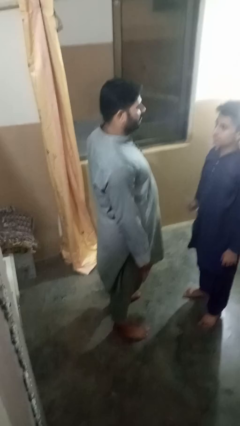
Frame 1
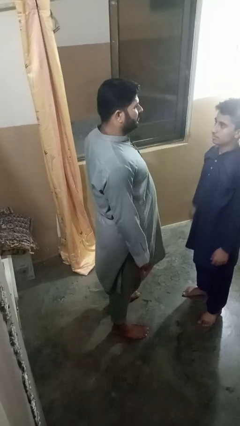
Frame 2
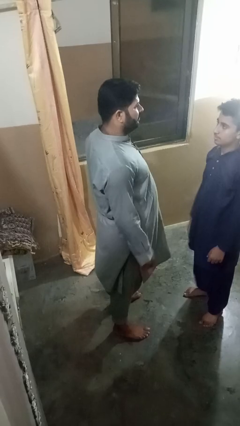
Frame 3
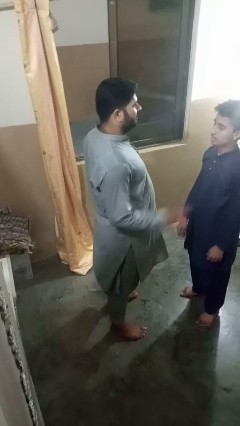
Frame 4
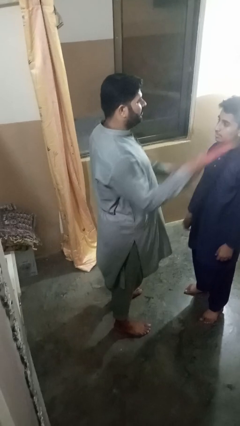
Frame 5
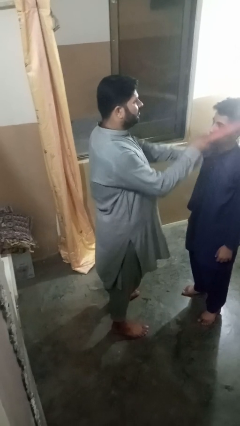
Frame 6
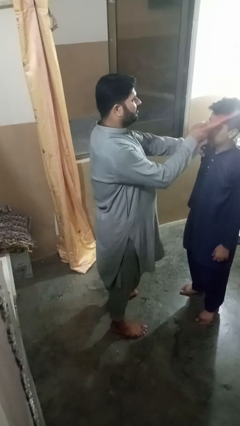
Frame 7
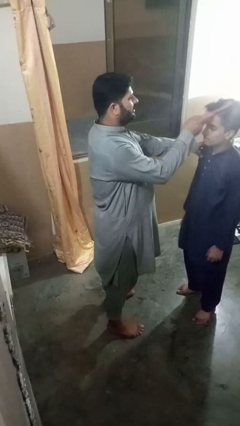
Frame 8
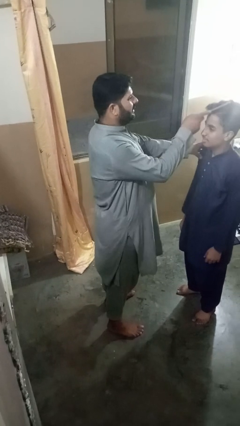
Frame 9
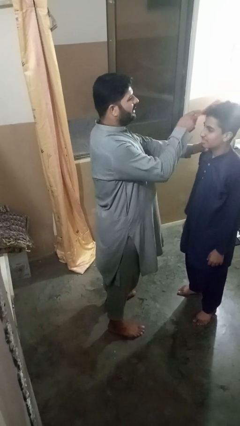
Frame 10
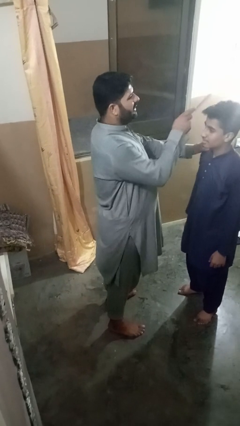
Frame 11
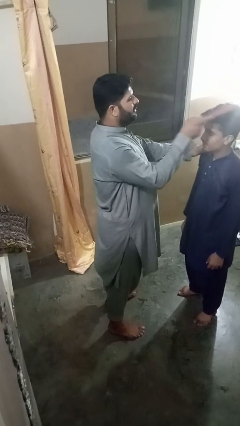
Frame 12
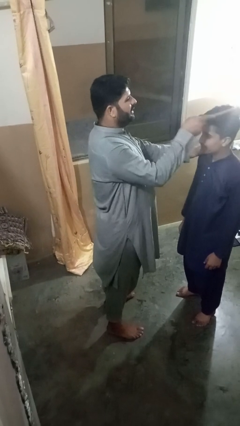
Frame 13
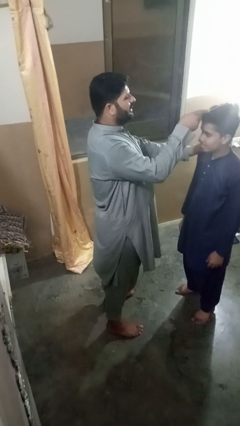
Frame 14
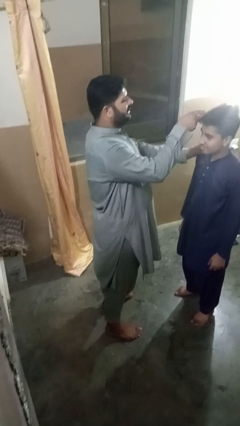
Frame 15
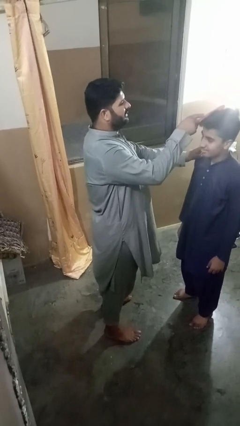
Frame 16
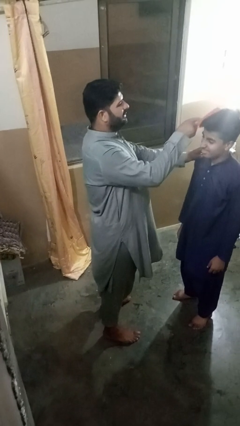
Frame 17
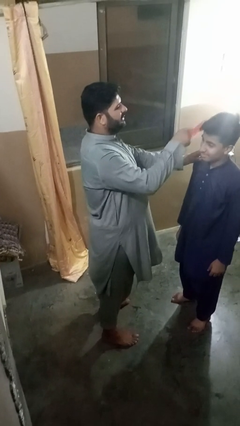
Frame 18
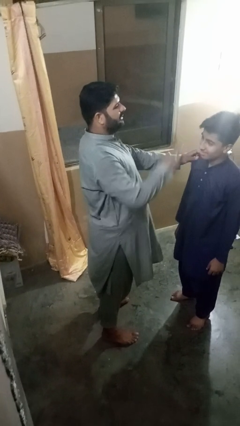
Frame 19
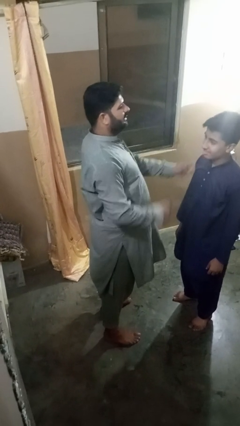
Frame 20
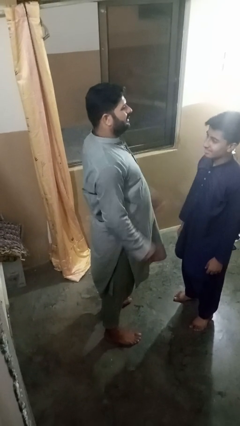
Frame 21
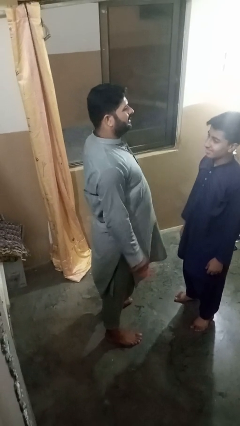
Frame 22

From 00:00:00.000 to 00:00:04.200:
person brushes hair of person

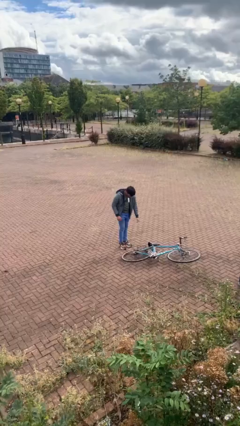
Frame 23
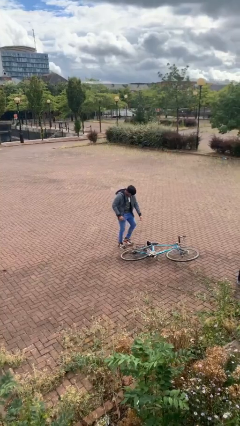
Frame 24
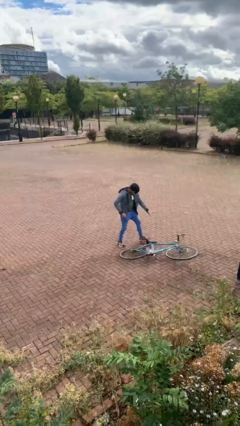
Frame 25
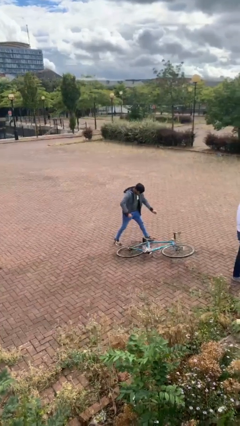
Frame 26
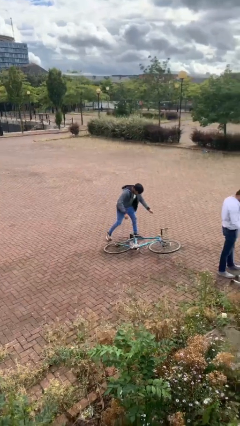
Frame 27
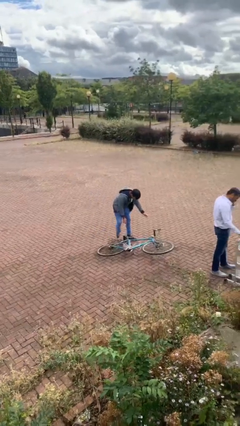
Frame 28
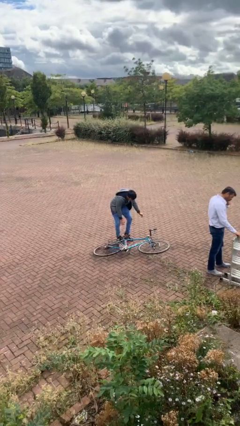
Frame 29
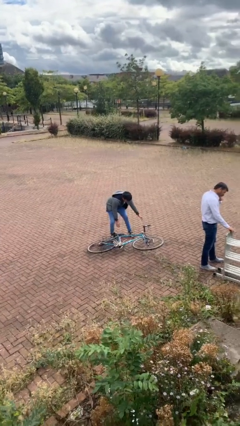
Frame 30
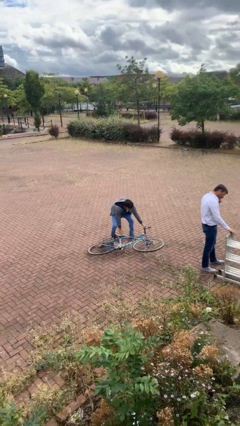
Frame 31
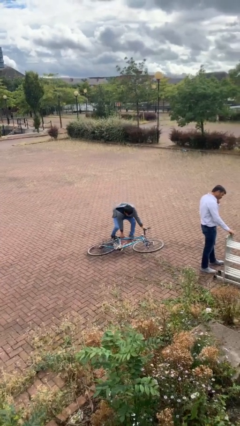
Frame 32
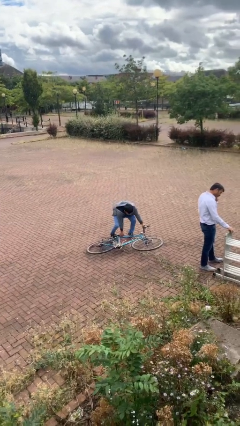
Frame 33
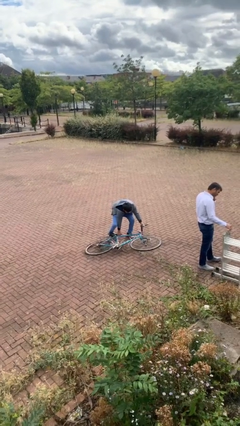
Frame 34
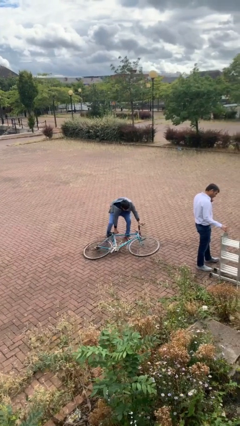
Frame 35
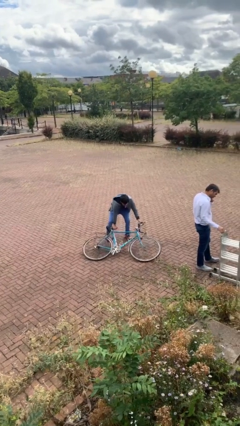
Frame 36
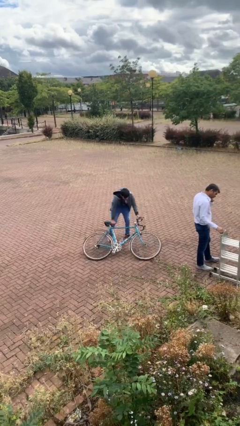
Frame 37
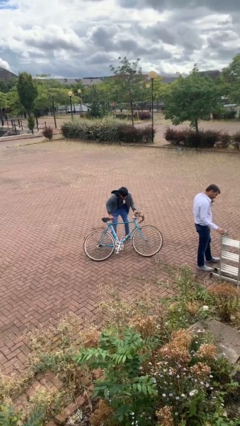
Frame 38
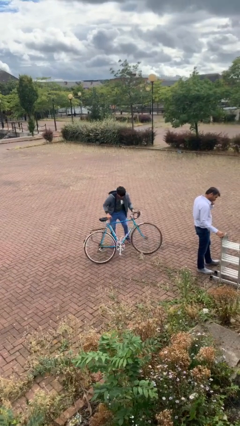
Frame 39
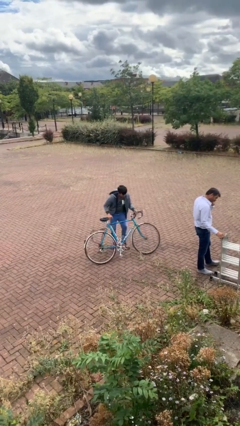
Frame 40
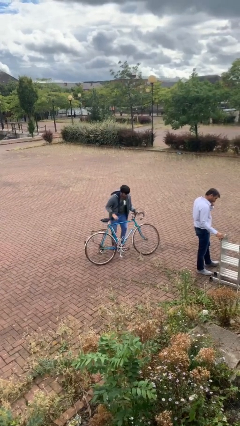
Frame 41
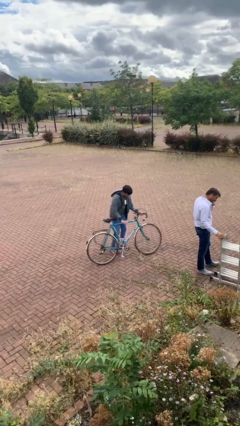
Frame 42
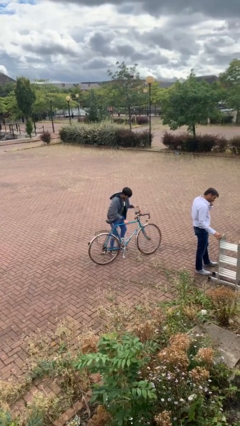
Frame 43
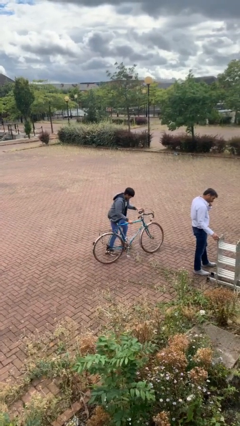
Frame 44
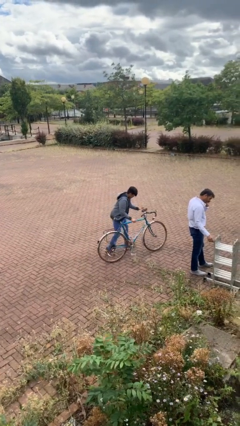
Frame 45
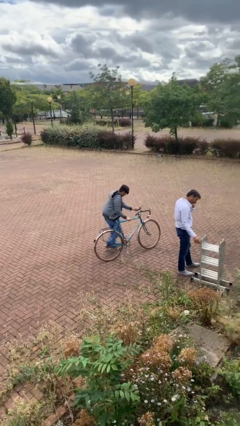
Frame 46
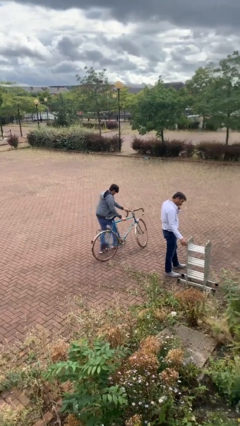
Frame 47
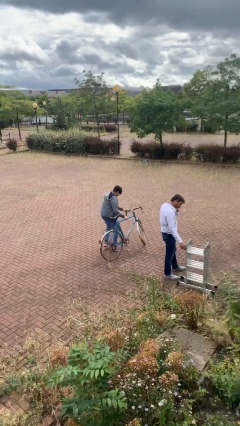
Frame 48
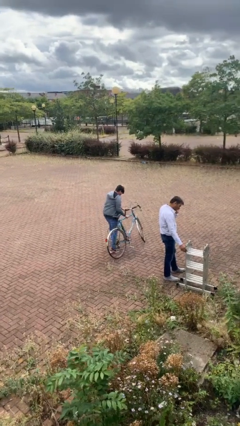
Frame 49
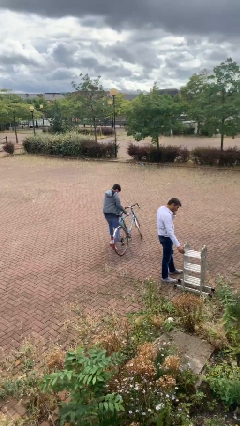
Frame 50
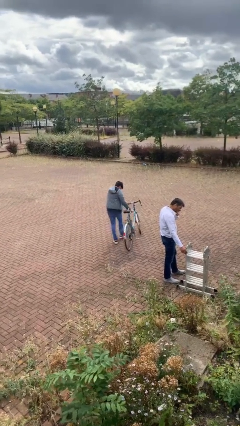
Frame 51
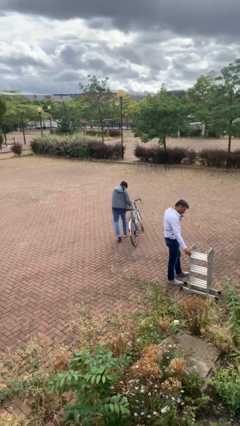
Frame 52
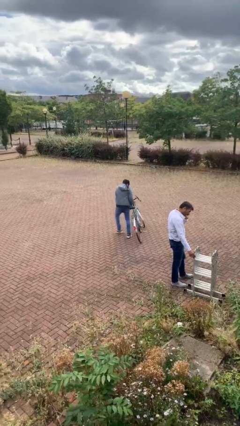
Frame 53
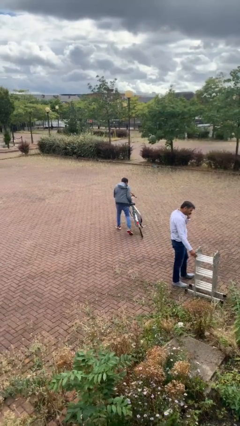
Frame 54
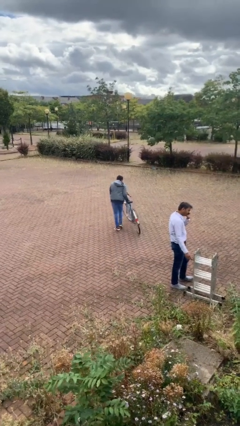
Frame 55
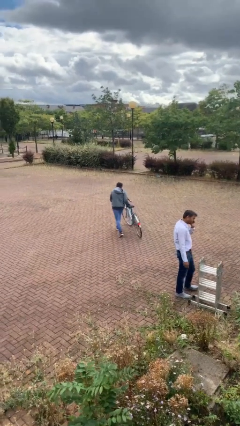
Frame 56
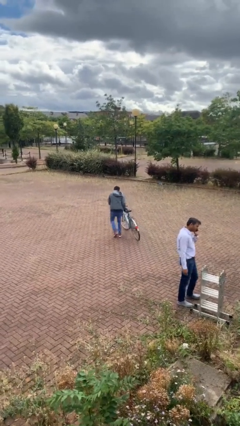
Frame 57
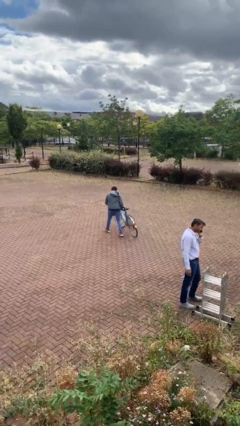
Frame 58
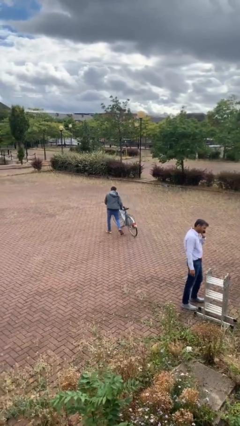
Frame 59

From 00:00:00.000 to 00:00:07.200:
person steals object from person

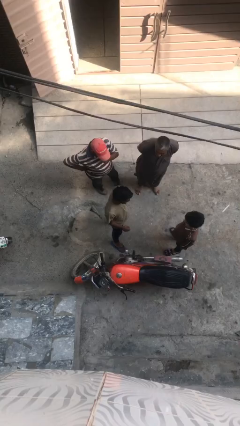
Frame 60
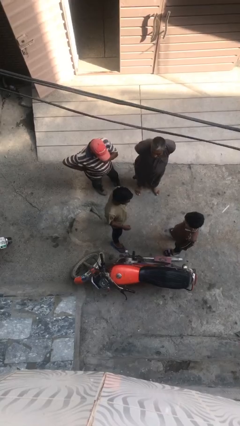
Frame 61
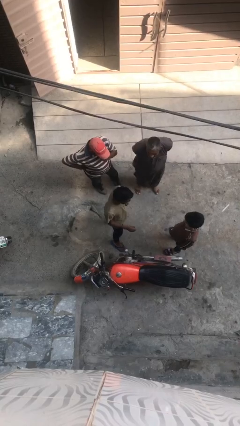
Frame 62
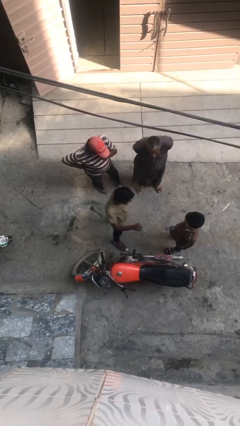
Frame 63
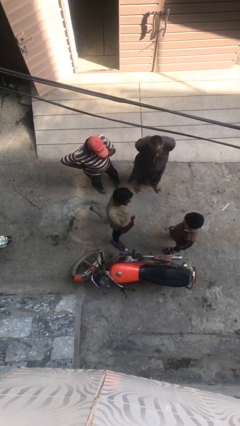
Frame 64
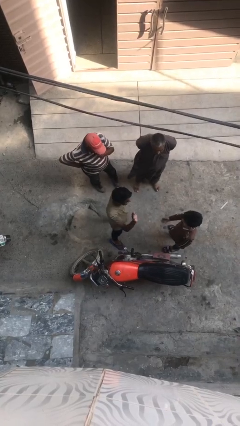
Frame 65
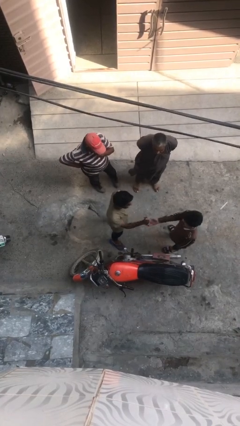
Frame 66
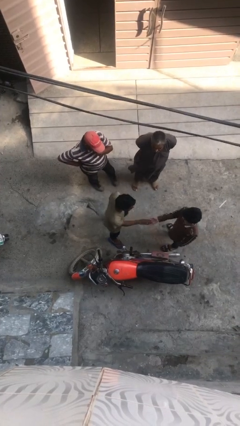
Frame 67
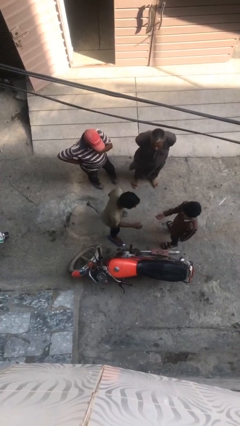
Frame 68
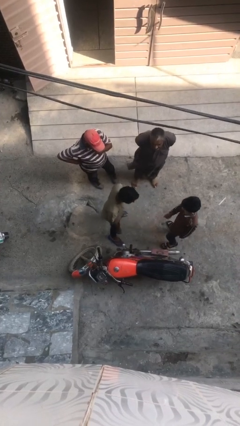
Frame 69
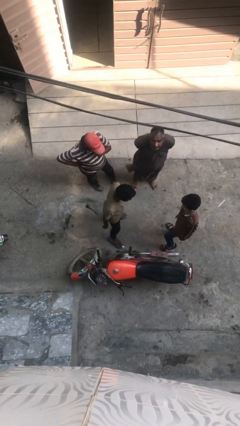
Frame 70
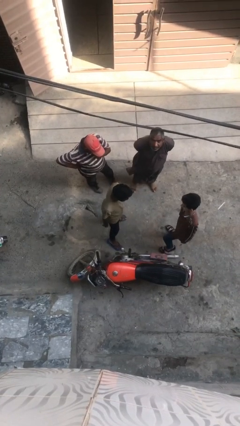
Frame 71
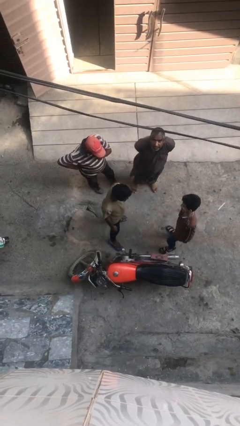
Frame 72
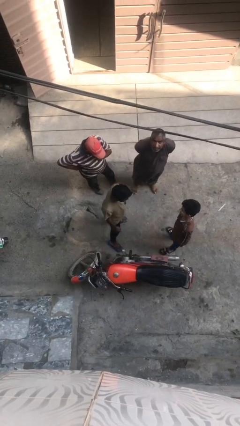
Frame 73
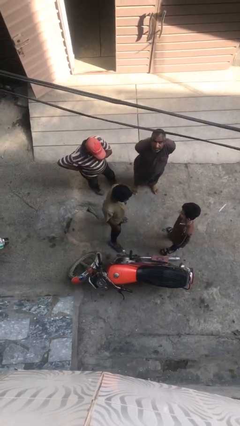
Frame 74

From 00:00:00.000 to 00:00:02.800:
person laughs with person

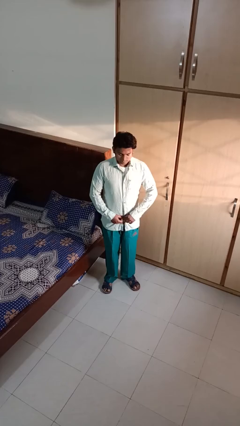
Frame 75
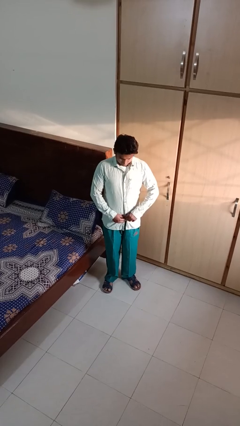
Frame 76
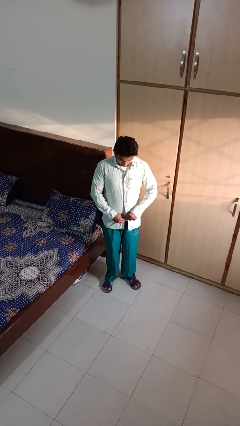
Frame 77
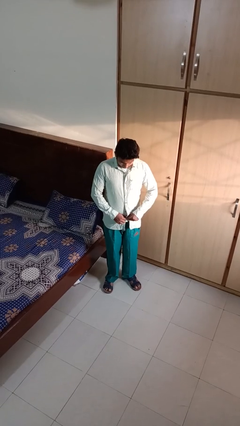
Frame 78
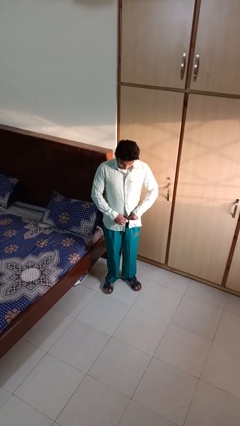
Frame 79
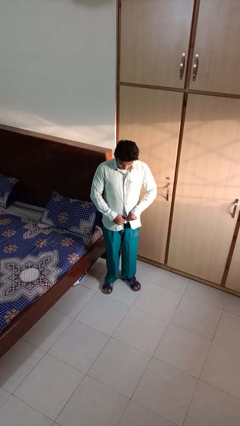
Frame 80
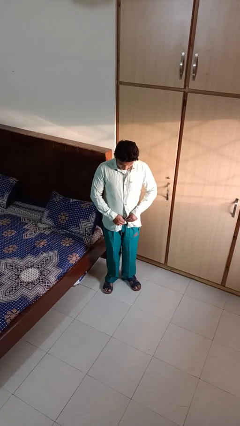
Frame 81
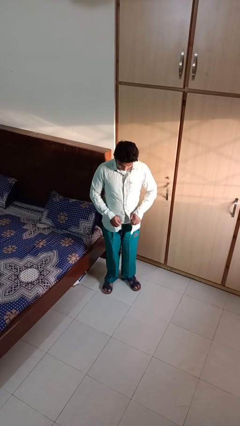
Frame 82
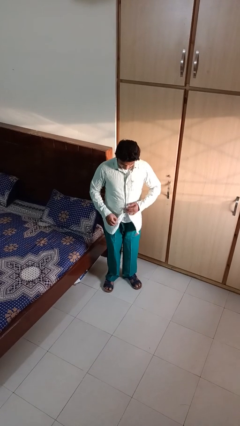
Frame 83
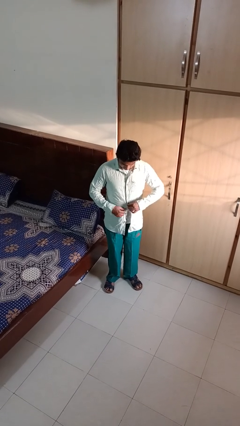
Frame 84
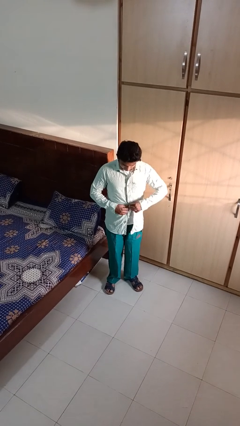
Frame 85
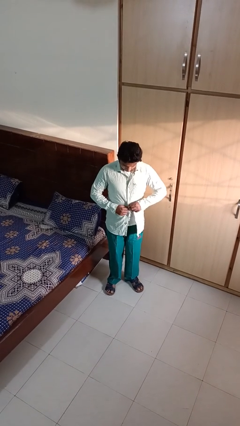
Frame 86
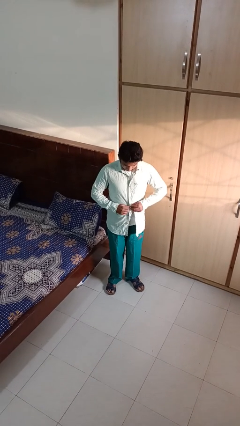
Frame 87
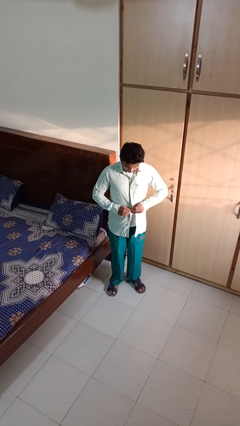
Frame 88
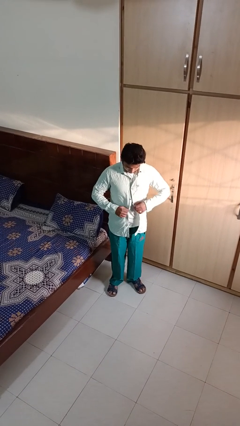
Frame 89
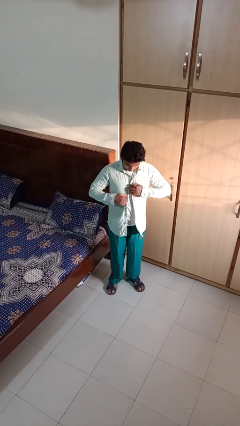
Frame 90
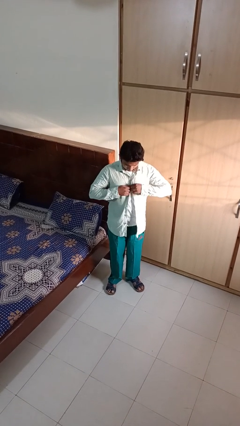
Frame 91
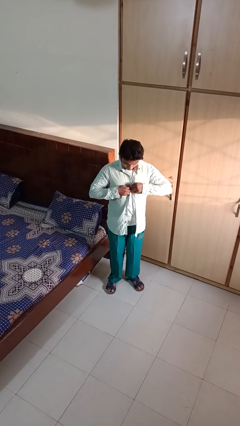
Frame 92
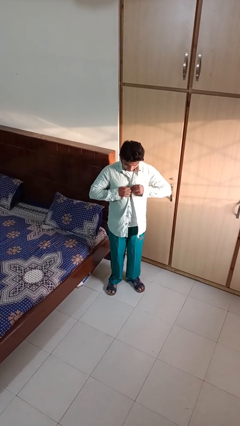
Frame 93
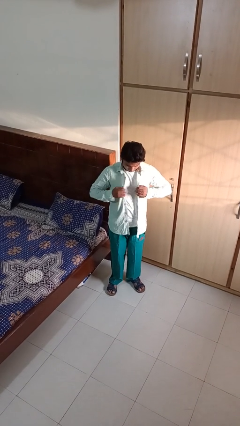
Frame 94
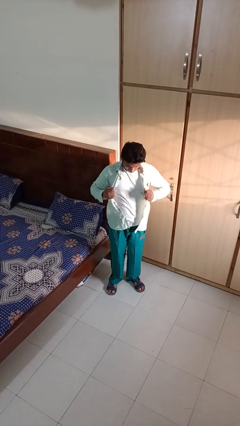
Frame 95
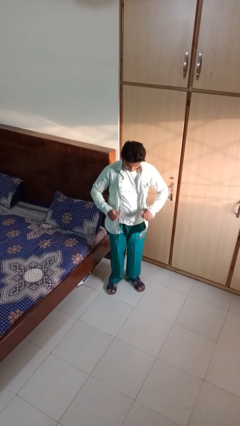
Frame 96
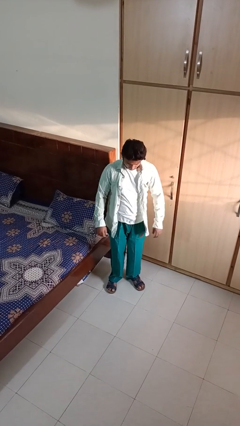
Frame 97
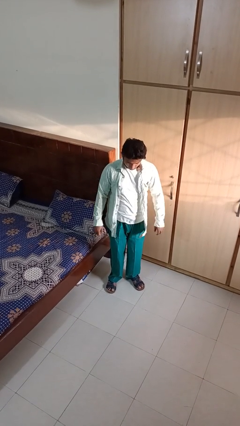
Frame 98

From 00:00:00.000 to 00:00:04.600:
person unbuttons shirt
